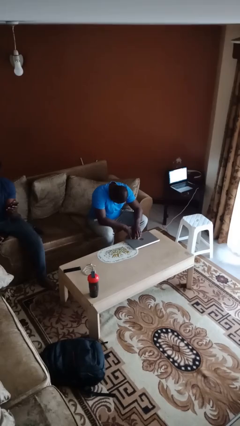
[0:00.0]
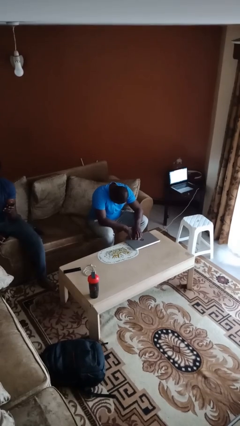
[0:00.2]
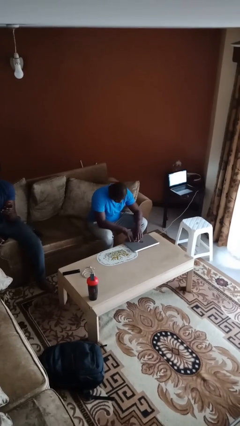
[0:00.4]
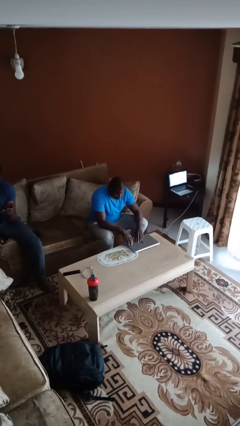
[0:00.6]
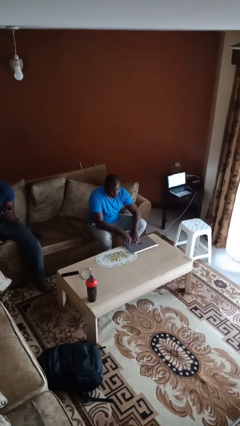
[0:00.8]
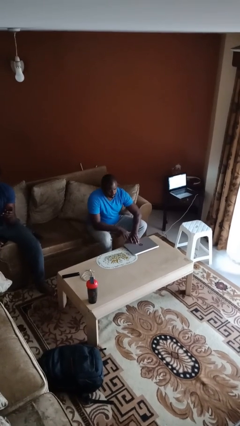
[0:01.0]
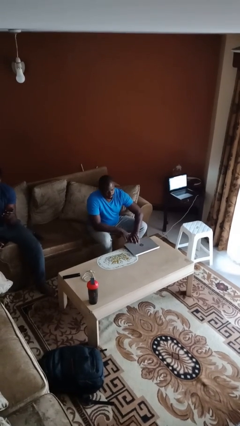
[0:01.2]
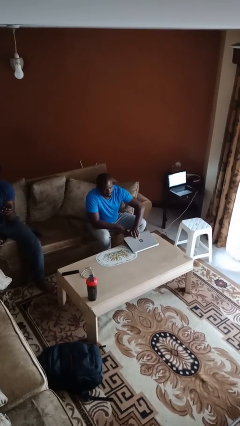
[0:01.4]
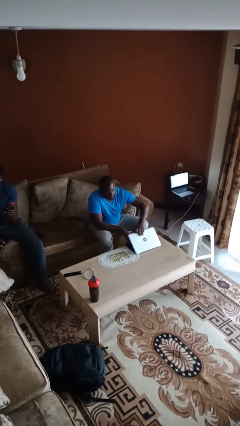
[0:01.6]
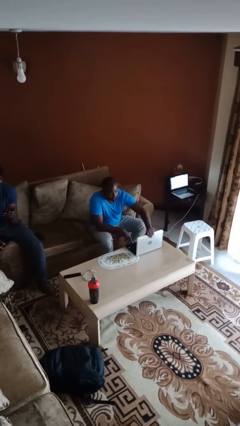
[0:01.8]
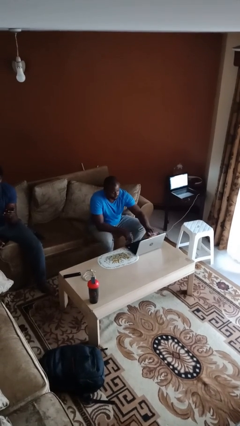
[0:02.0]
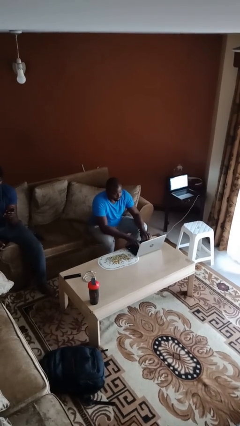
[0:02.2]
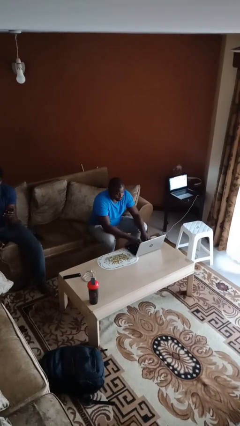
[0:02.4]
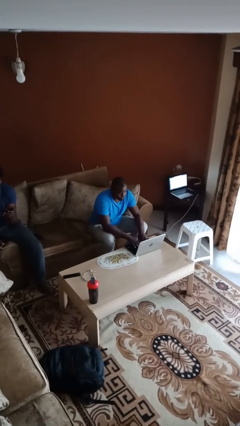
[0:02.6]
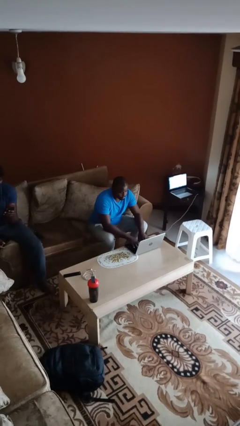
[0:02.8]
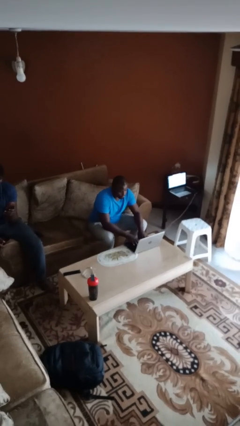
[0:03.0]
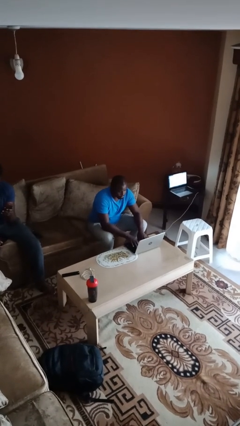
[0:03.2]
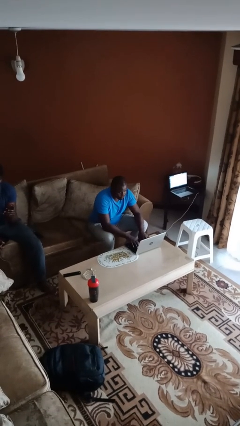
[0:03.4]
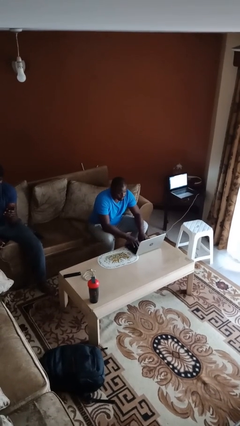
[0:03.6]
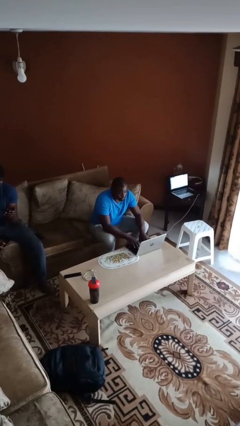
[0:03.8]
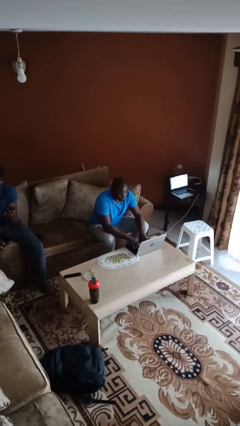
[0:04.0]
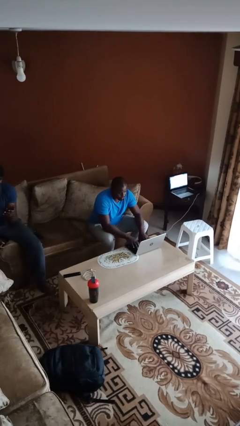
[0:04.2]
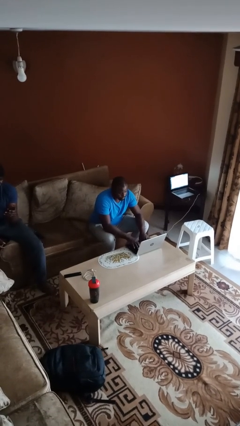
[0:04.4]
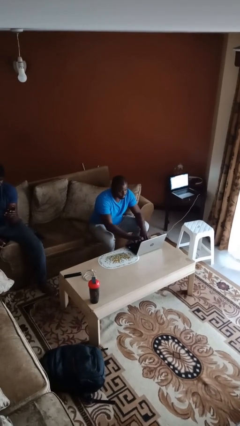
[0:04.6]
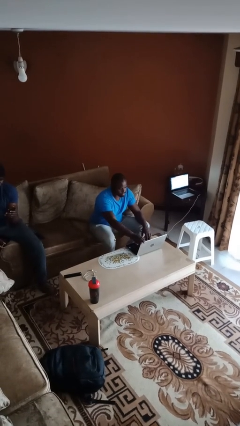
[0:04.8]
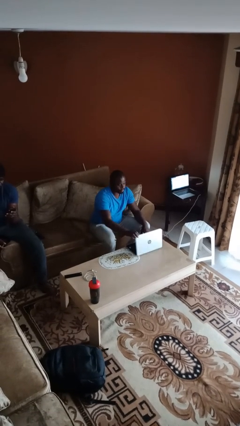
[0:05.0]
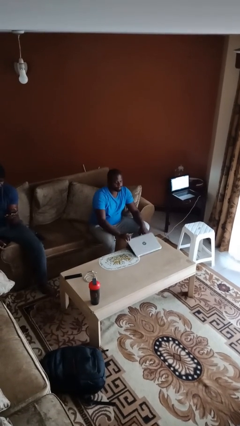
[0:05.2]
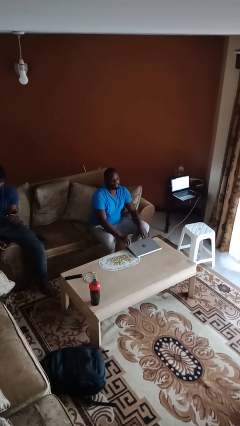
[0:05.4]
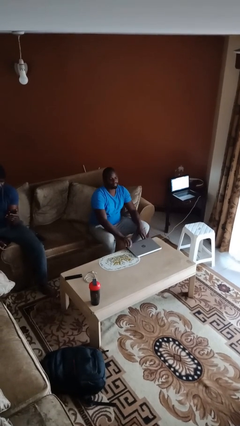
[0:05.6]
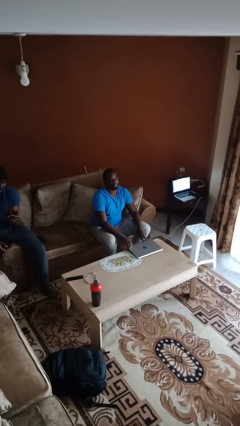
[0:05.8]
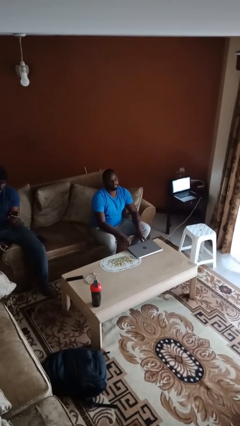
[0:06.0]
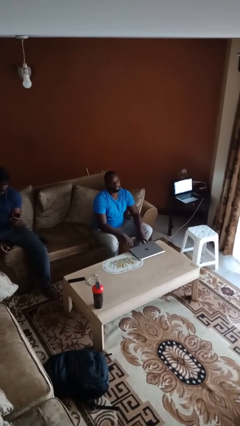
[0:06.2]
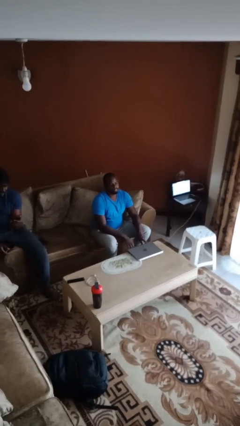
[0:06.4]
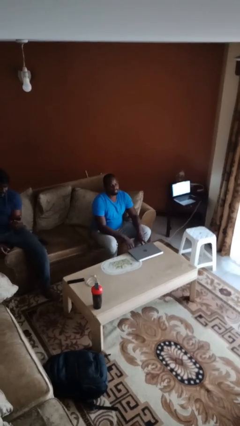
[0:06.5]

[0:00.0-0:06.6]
person interacts with laptop

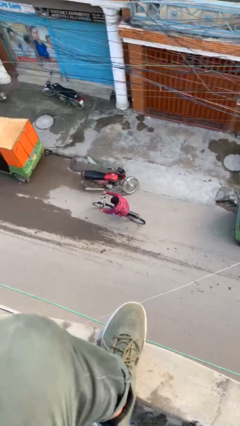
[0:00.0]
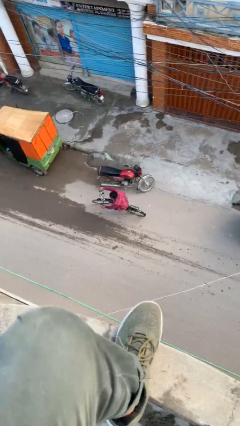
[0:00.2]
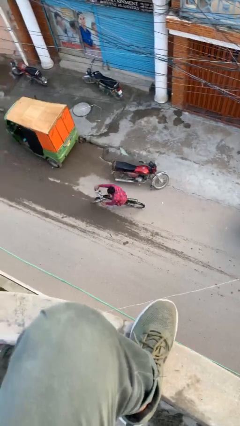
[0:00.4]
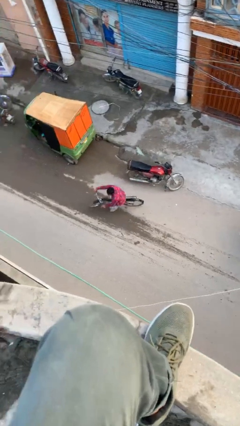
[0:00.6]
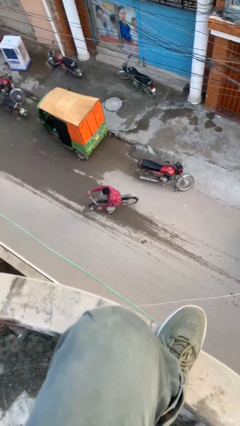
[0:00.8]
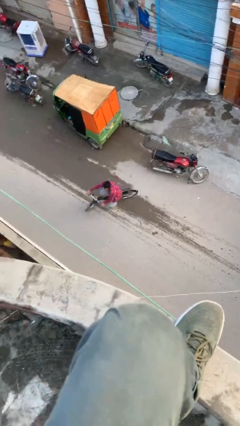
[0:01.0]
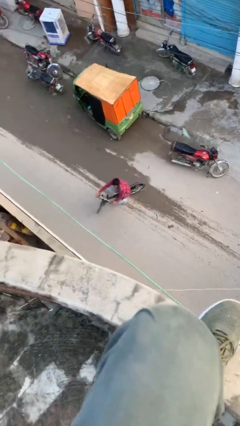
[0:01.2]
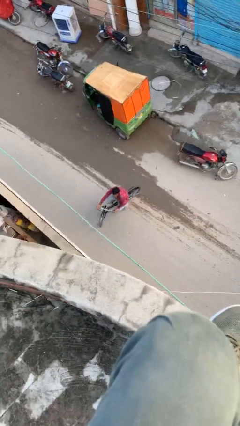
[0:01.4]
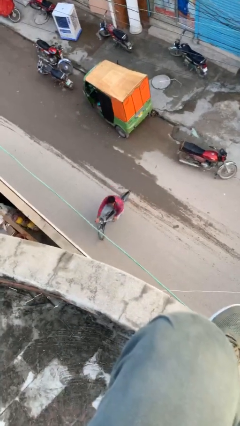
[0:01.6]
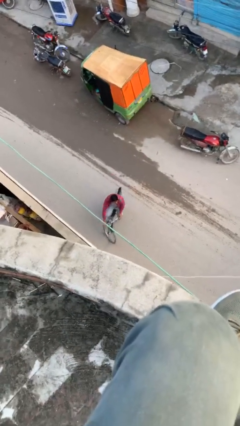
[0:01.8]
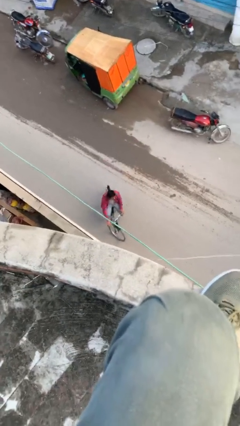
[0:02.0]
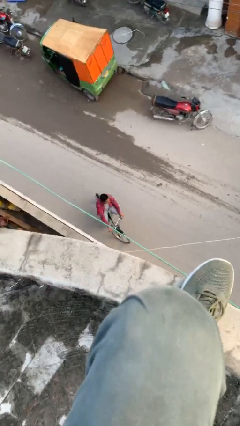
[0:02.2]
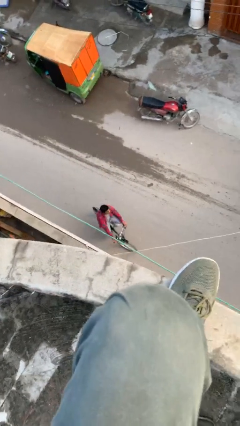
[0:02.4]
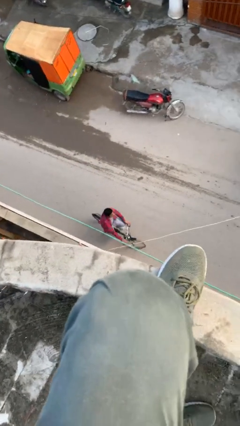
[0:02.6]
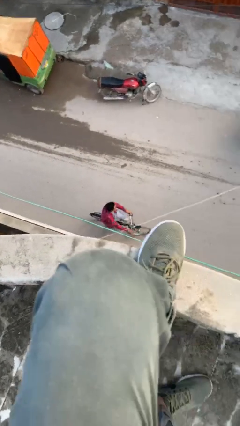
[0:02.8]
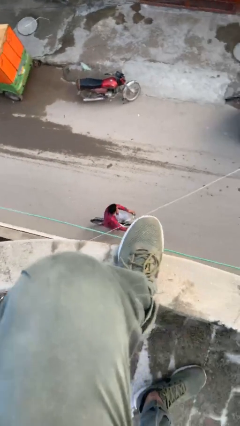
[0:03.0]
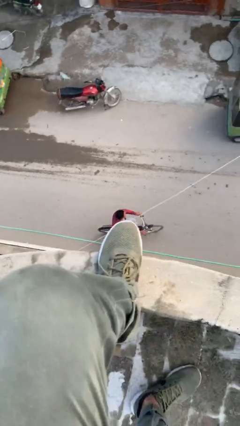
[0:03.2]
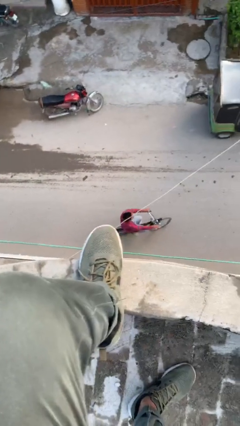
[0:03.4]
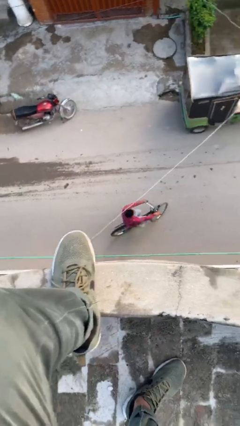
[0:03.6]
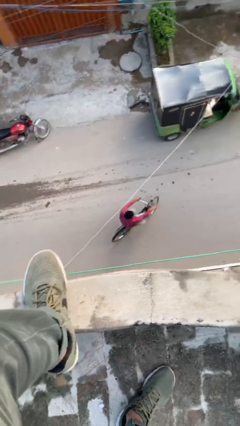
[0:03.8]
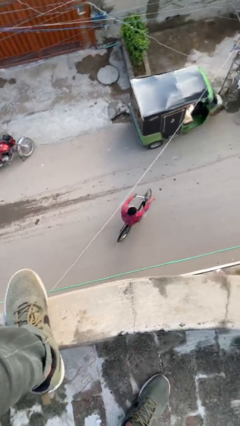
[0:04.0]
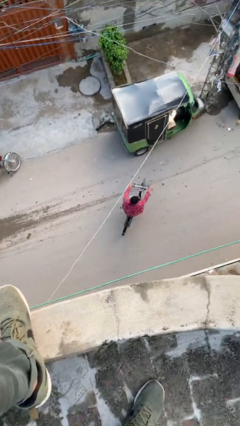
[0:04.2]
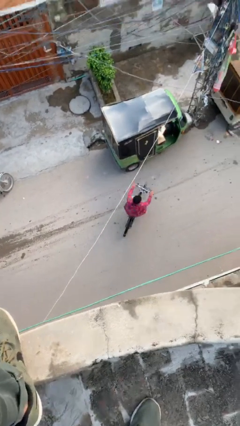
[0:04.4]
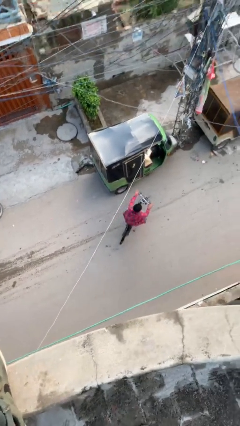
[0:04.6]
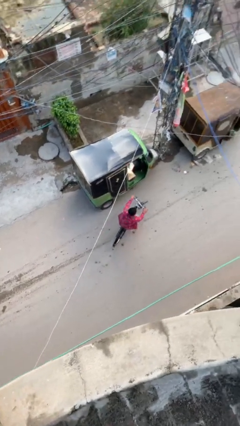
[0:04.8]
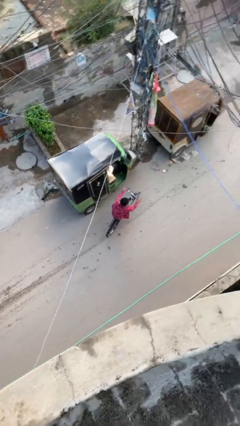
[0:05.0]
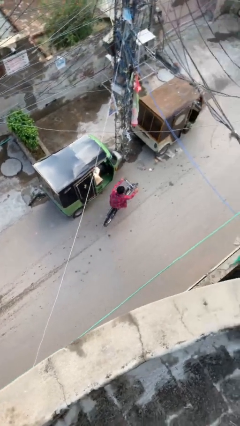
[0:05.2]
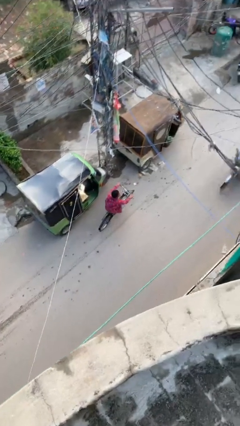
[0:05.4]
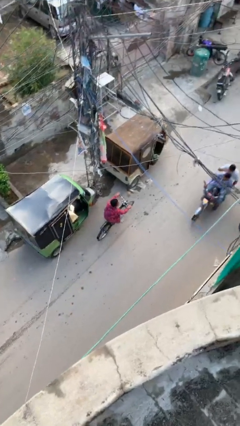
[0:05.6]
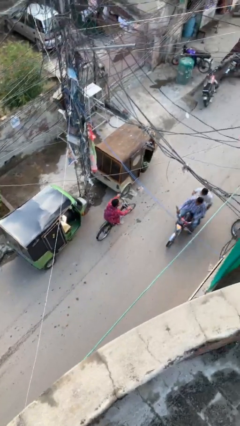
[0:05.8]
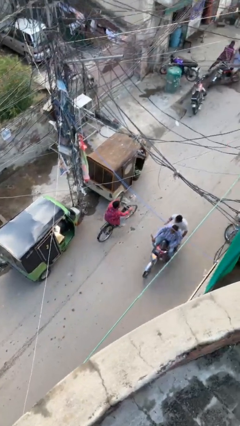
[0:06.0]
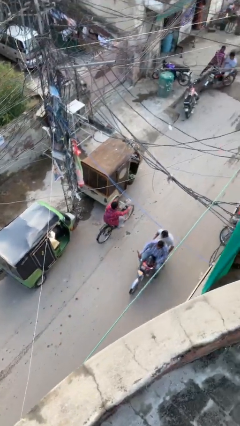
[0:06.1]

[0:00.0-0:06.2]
person rides bicycle

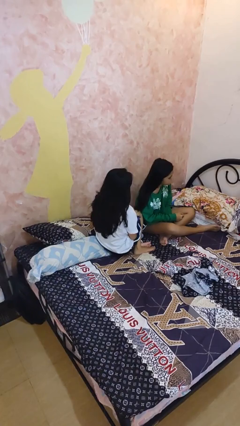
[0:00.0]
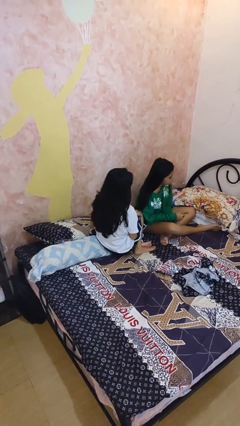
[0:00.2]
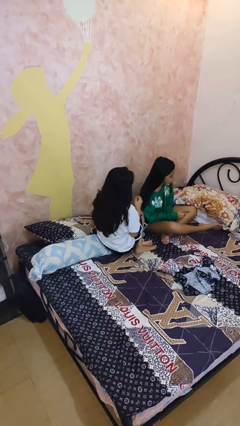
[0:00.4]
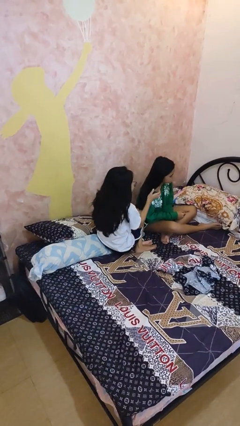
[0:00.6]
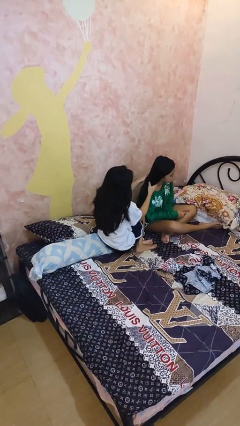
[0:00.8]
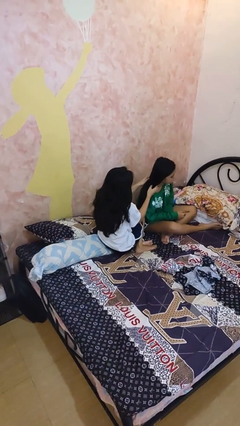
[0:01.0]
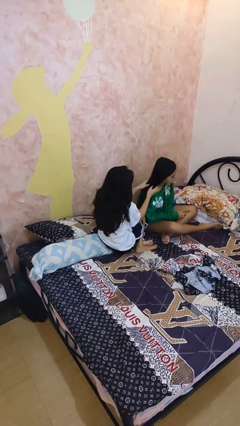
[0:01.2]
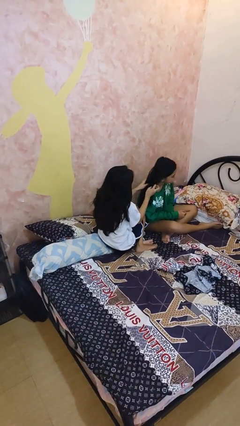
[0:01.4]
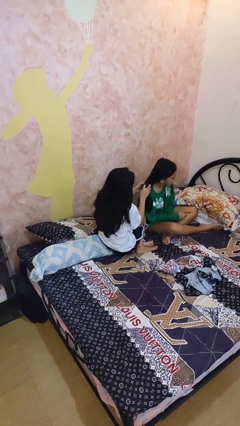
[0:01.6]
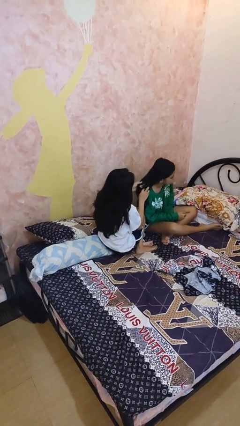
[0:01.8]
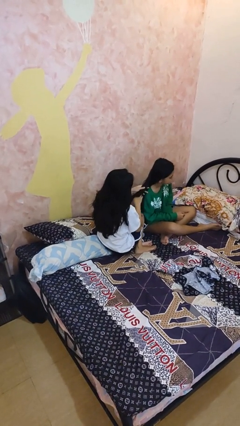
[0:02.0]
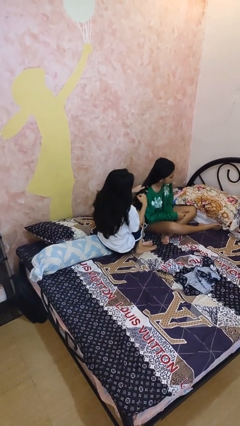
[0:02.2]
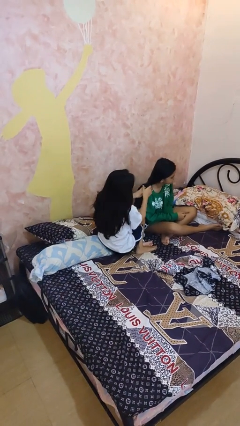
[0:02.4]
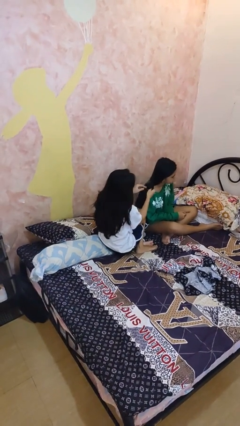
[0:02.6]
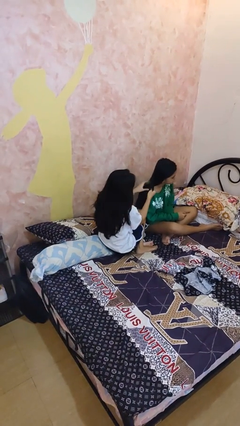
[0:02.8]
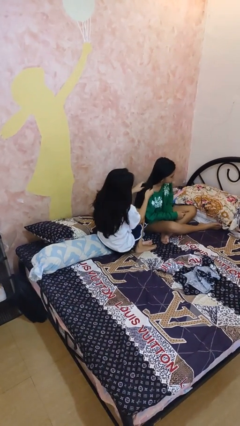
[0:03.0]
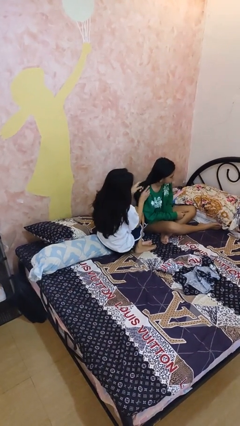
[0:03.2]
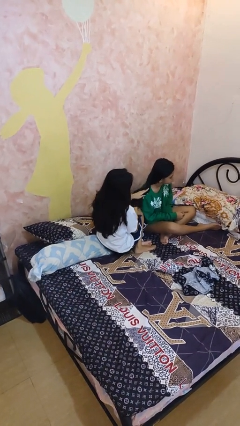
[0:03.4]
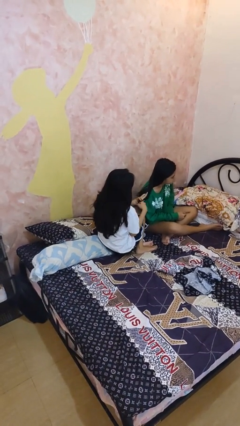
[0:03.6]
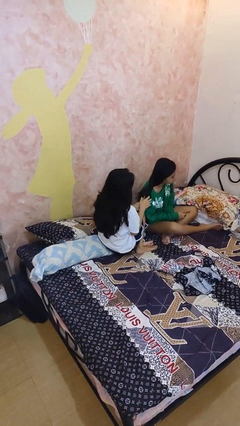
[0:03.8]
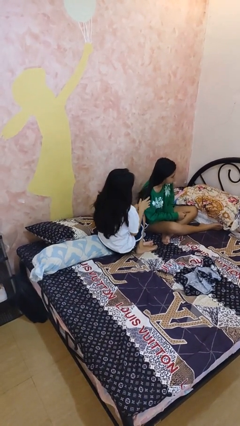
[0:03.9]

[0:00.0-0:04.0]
person braids hair of person

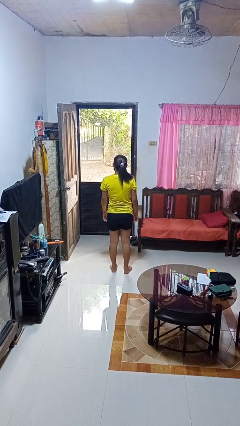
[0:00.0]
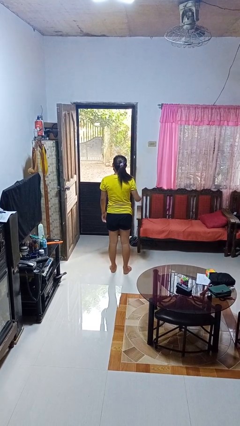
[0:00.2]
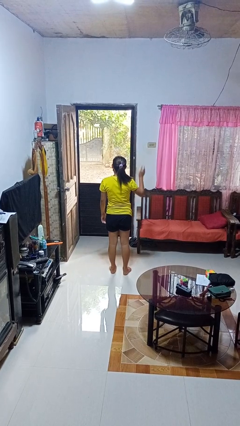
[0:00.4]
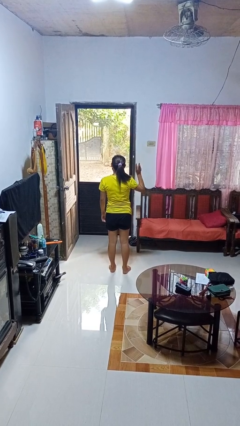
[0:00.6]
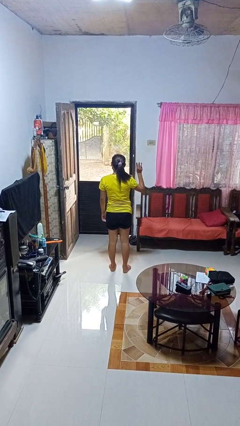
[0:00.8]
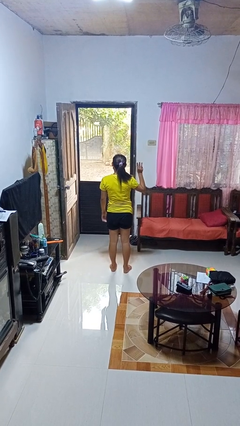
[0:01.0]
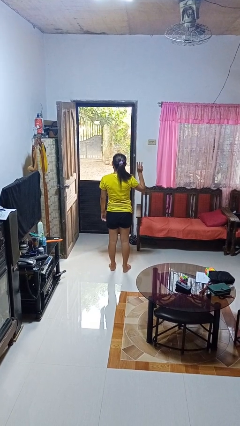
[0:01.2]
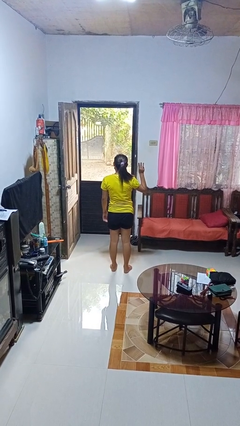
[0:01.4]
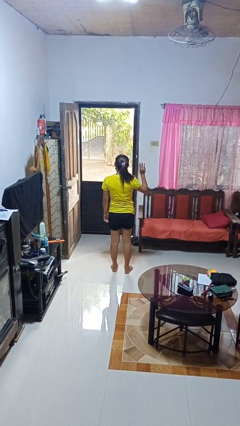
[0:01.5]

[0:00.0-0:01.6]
person gestures number three
